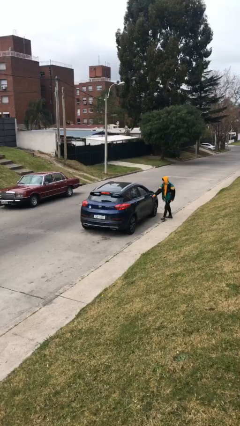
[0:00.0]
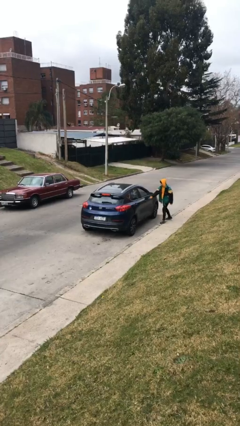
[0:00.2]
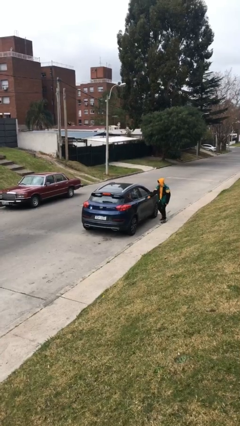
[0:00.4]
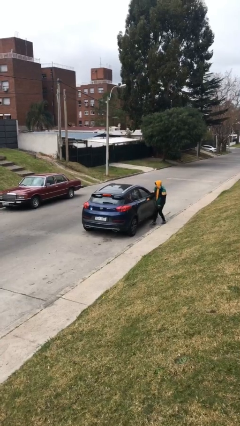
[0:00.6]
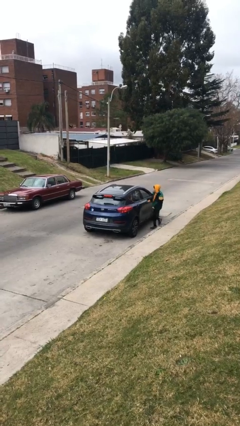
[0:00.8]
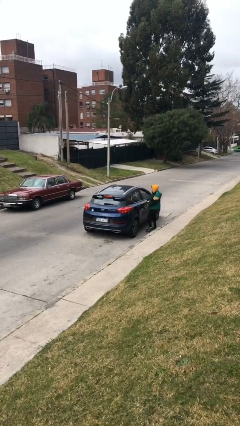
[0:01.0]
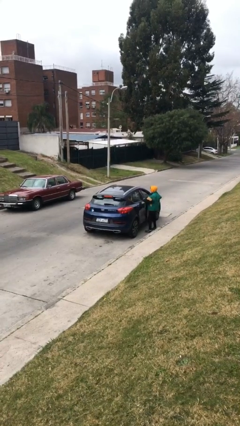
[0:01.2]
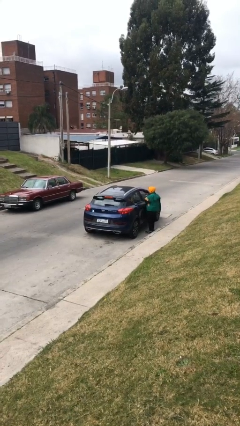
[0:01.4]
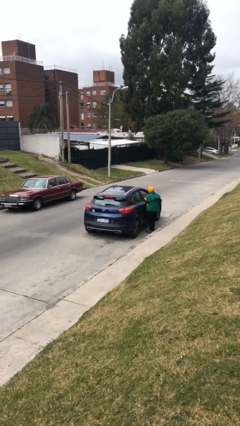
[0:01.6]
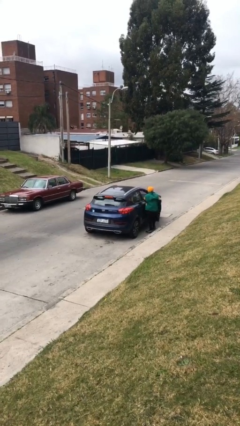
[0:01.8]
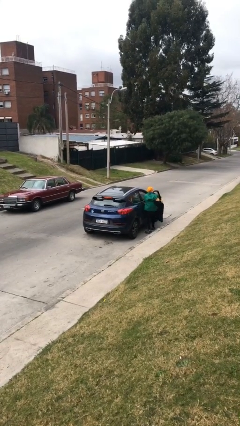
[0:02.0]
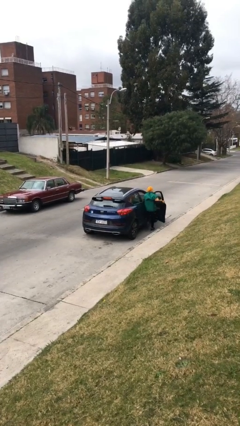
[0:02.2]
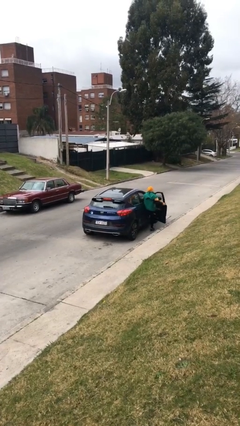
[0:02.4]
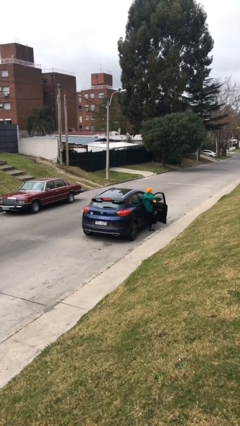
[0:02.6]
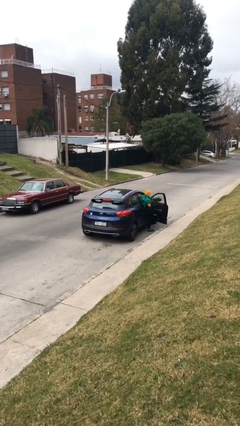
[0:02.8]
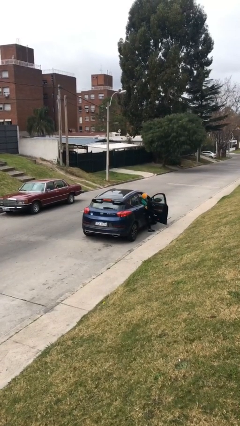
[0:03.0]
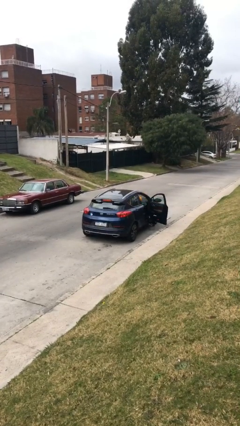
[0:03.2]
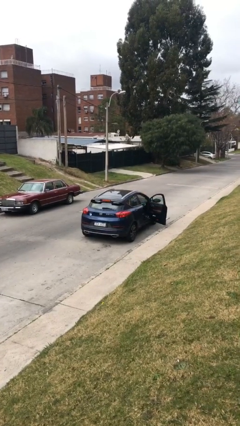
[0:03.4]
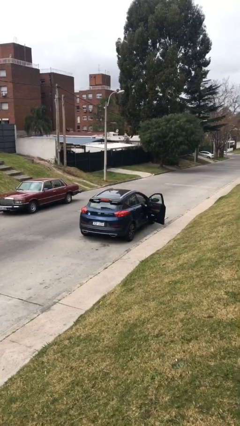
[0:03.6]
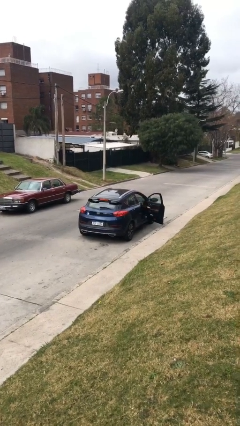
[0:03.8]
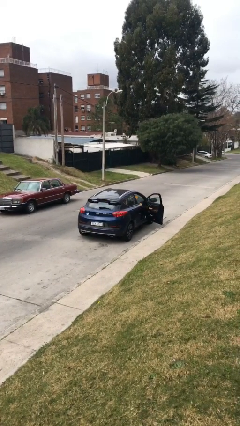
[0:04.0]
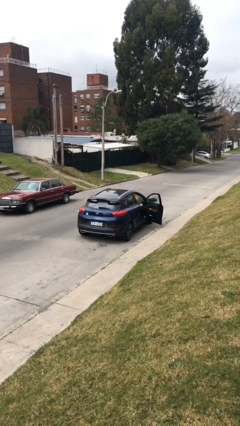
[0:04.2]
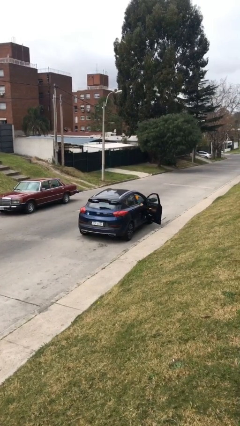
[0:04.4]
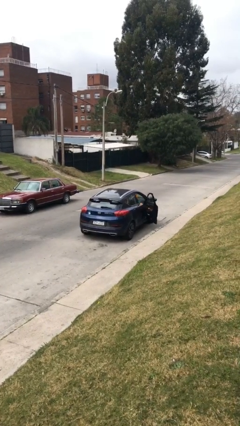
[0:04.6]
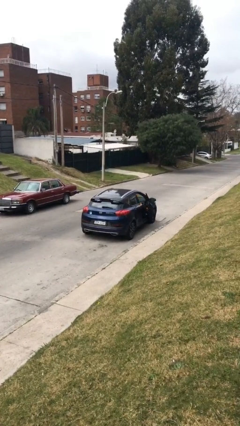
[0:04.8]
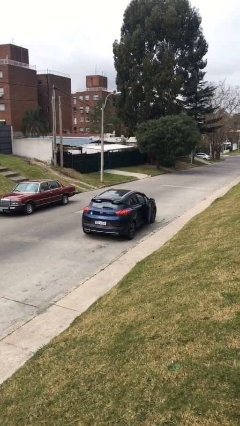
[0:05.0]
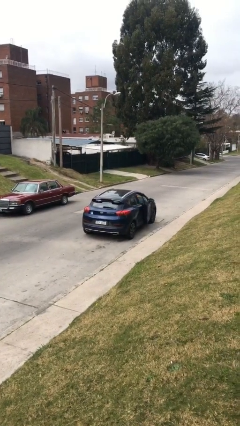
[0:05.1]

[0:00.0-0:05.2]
car picks up person

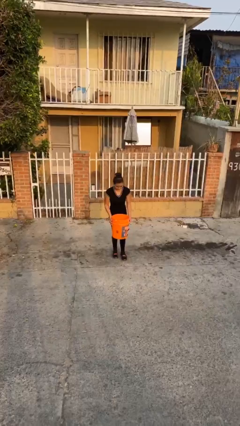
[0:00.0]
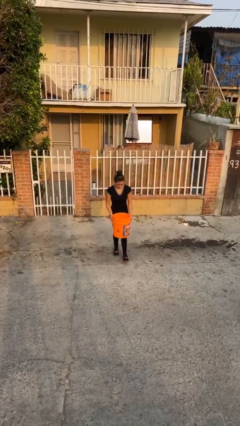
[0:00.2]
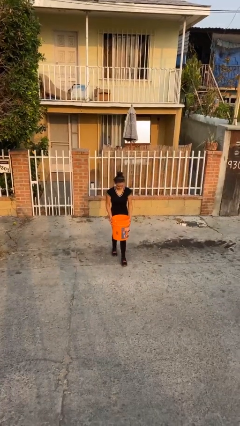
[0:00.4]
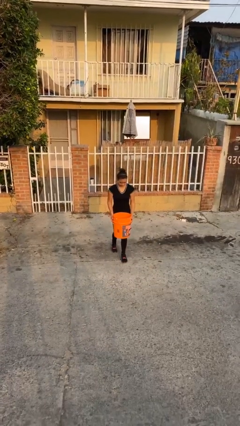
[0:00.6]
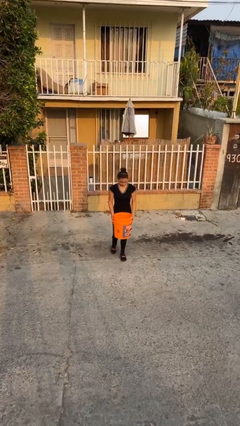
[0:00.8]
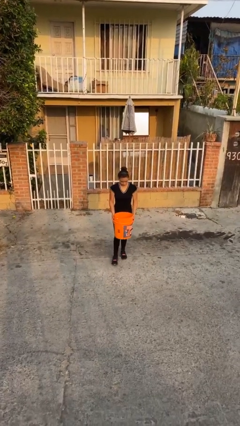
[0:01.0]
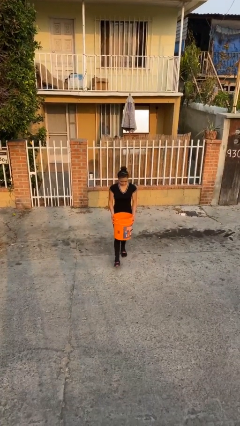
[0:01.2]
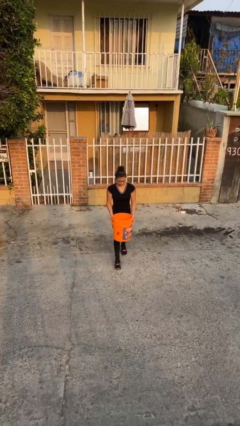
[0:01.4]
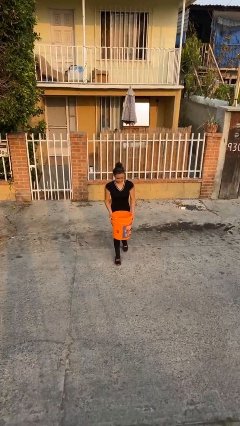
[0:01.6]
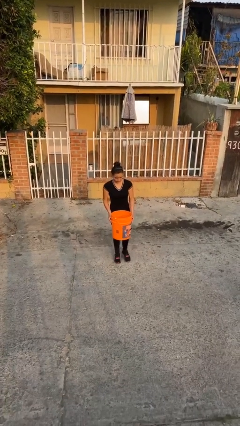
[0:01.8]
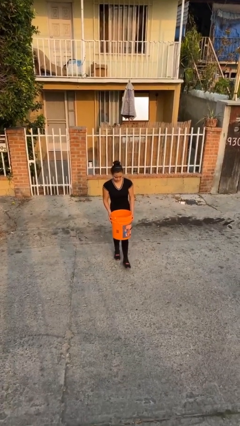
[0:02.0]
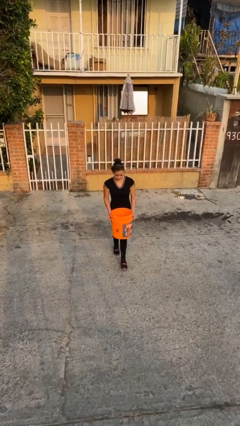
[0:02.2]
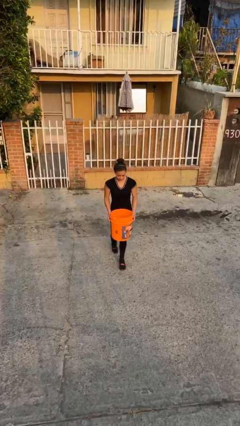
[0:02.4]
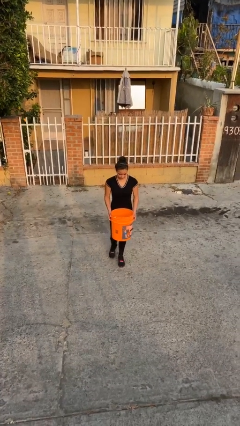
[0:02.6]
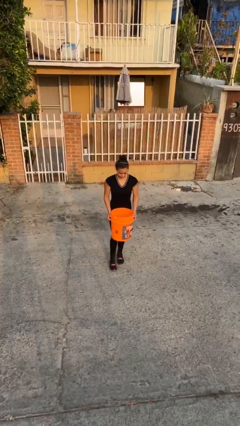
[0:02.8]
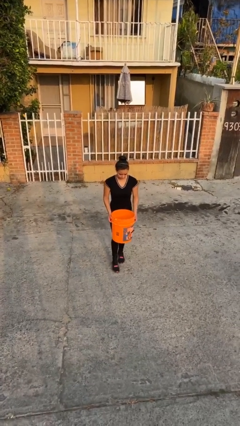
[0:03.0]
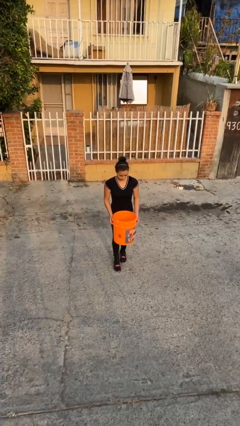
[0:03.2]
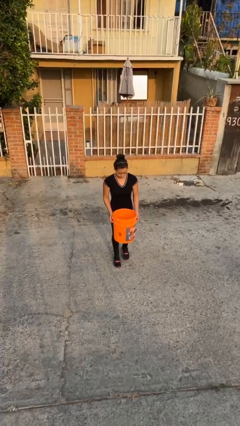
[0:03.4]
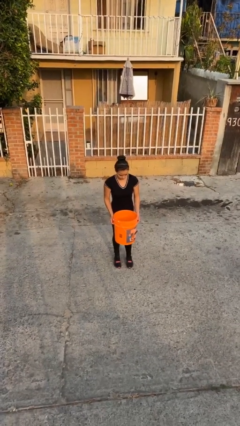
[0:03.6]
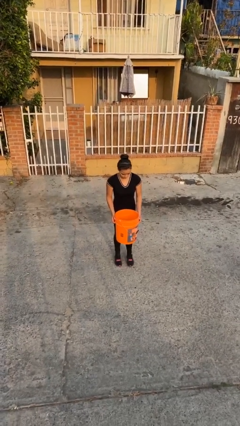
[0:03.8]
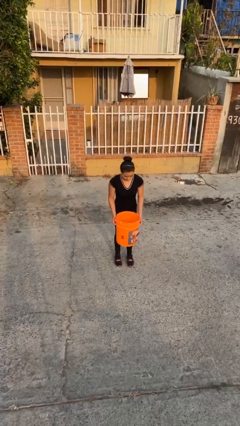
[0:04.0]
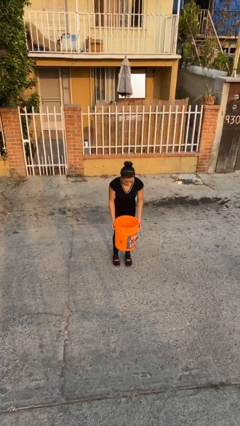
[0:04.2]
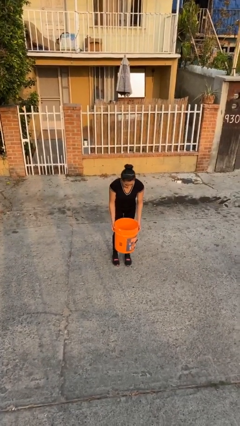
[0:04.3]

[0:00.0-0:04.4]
person carries heavy object

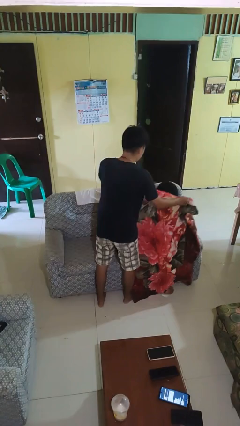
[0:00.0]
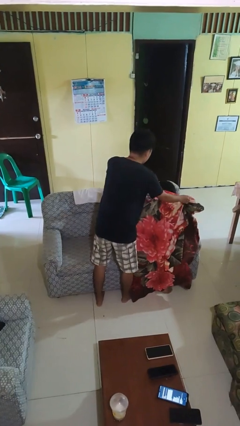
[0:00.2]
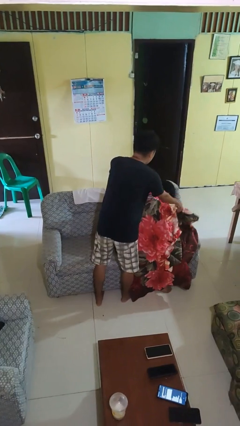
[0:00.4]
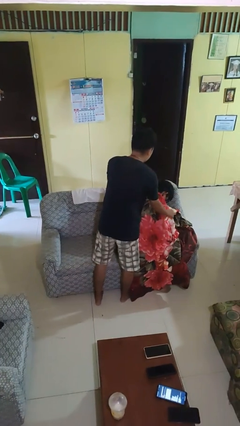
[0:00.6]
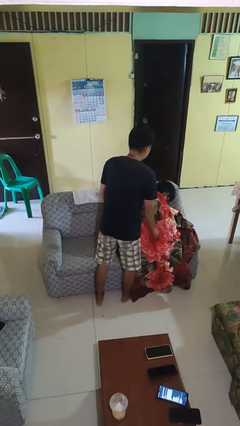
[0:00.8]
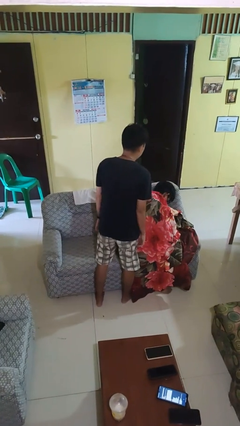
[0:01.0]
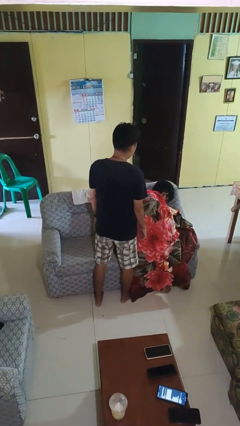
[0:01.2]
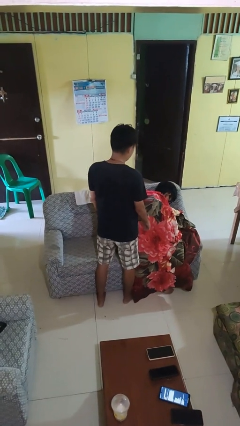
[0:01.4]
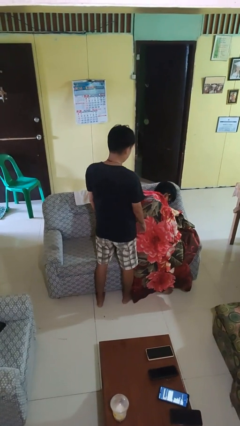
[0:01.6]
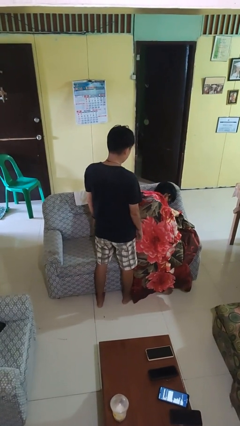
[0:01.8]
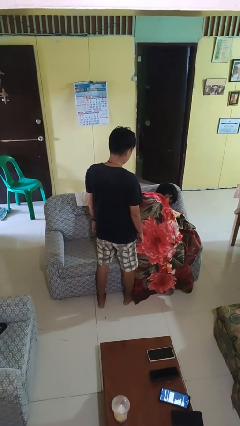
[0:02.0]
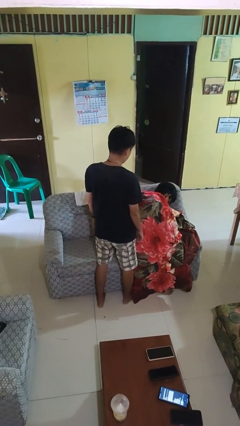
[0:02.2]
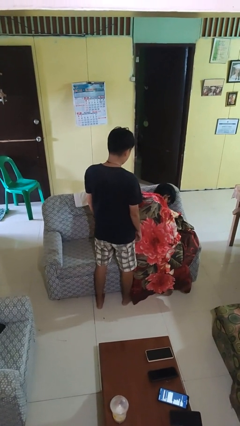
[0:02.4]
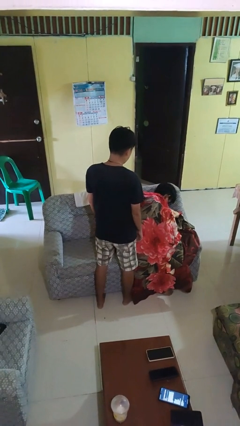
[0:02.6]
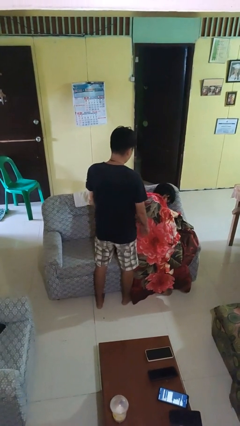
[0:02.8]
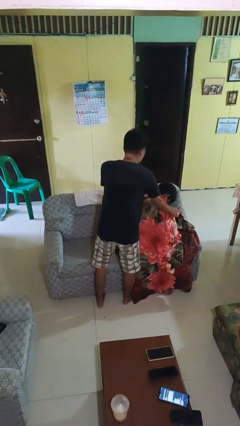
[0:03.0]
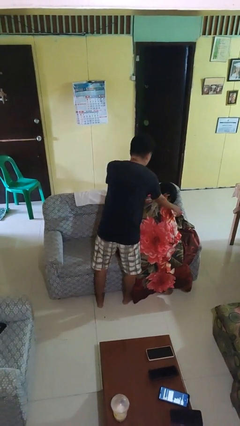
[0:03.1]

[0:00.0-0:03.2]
person covers friend with blanket

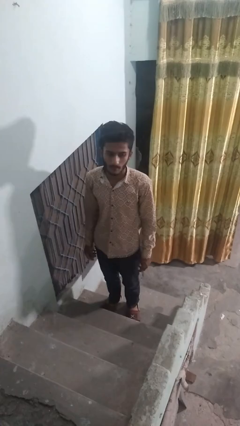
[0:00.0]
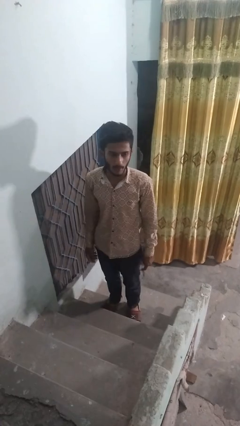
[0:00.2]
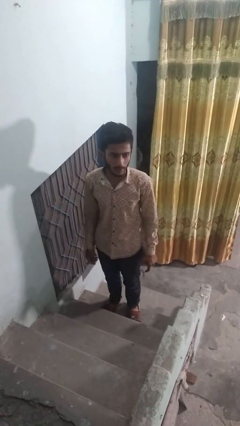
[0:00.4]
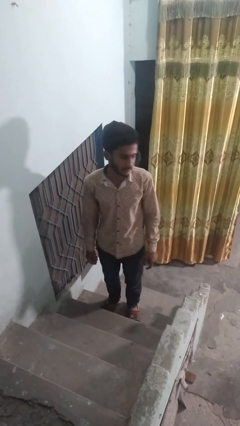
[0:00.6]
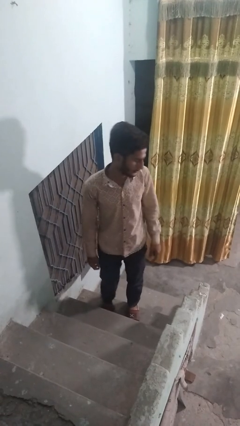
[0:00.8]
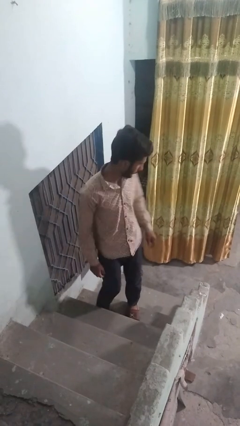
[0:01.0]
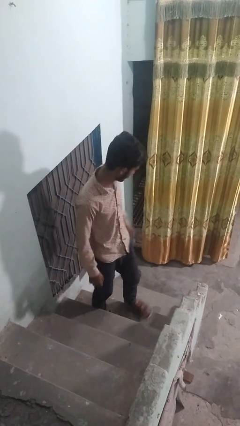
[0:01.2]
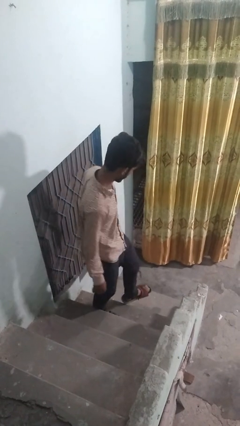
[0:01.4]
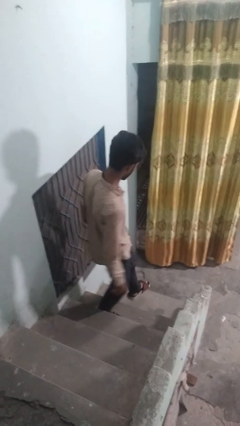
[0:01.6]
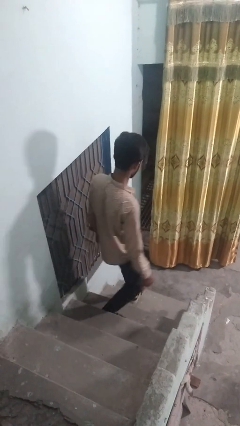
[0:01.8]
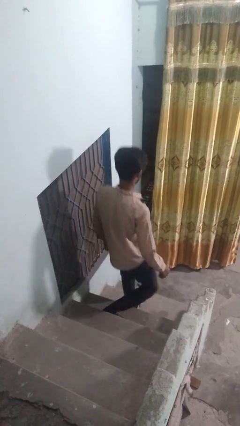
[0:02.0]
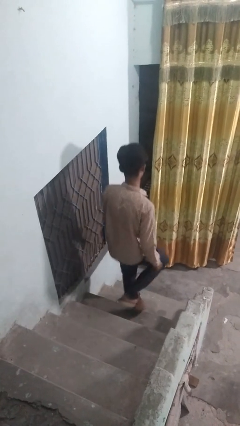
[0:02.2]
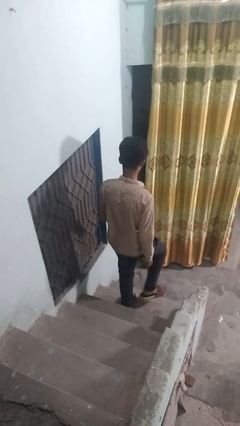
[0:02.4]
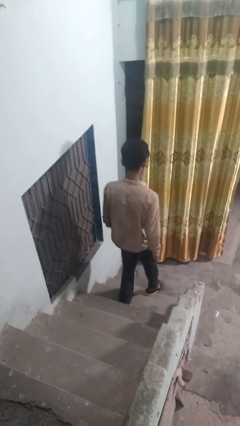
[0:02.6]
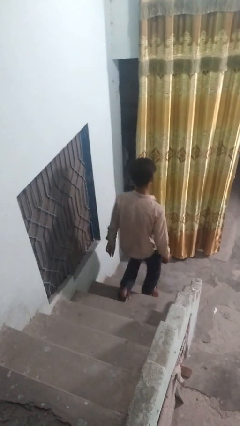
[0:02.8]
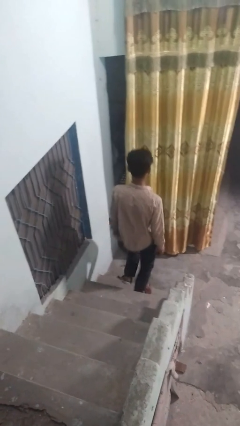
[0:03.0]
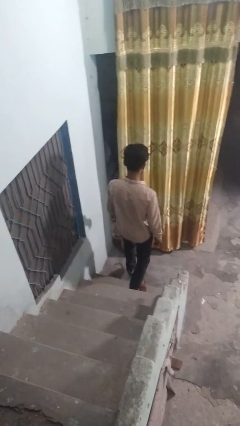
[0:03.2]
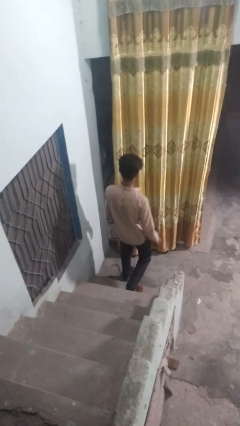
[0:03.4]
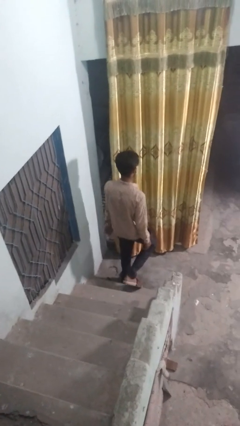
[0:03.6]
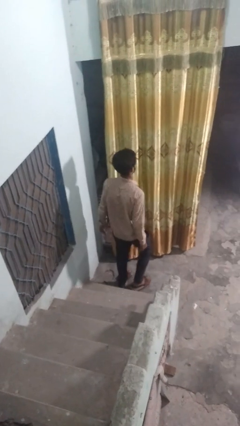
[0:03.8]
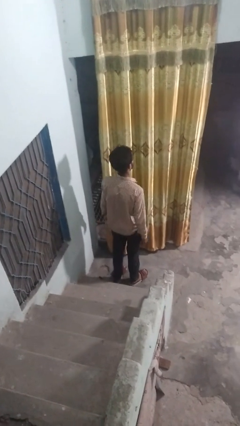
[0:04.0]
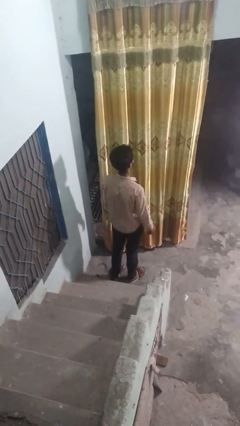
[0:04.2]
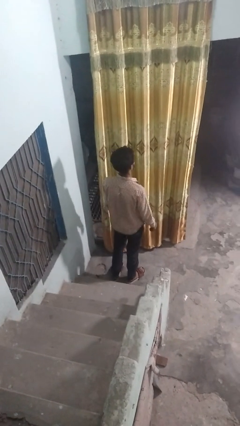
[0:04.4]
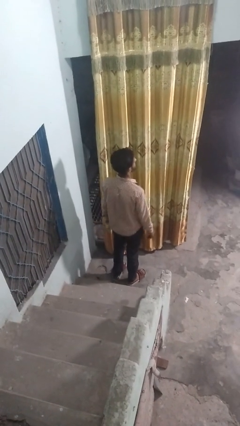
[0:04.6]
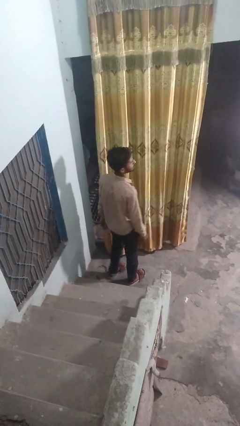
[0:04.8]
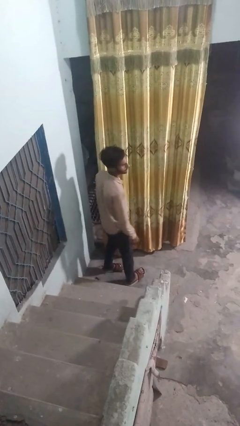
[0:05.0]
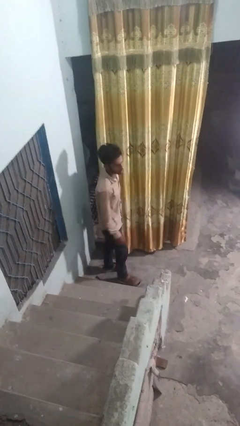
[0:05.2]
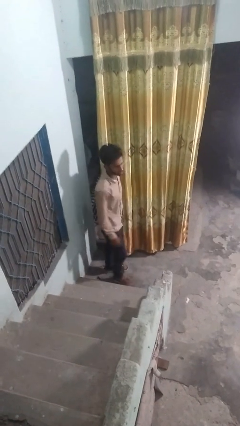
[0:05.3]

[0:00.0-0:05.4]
person climbs down stairs

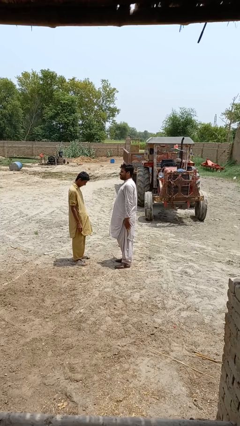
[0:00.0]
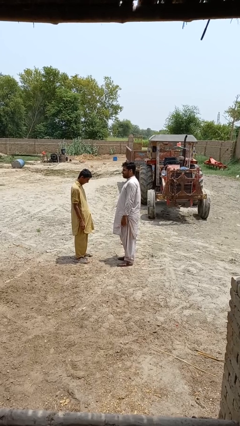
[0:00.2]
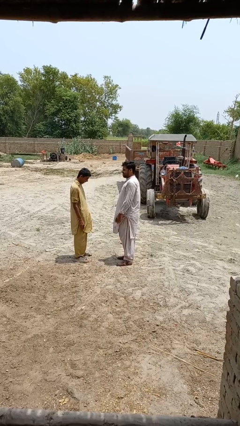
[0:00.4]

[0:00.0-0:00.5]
person talks to person
